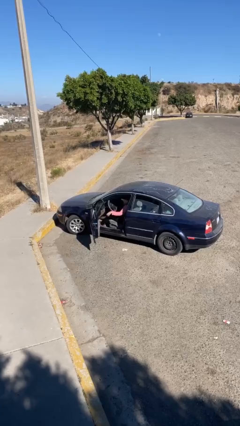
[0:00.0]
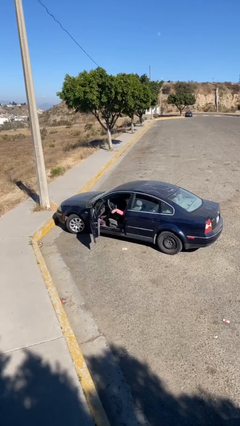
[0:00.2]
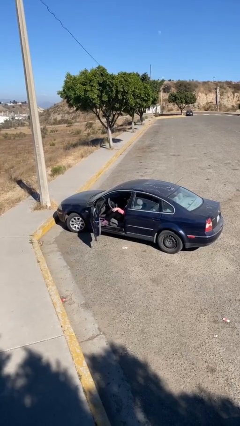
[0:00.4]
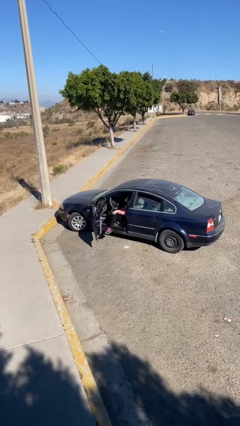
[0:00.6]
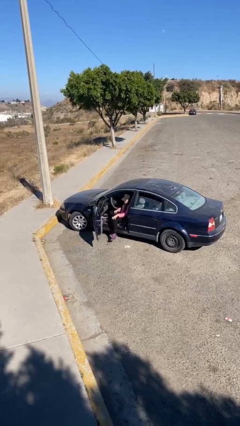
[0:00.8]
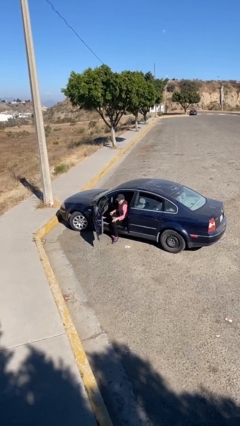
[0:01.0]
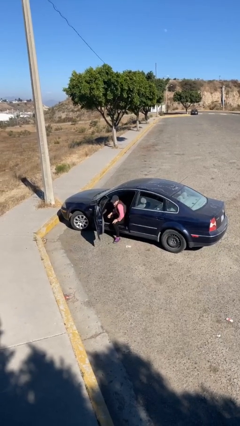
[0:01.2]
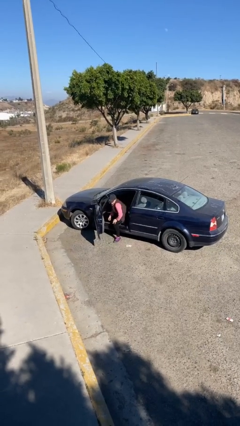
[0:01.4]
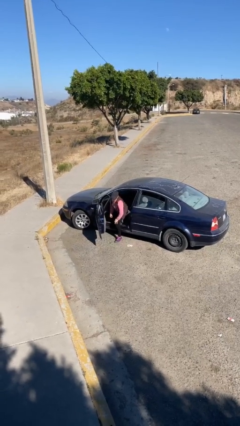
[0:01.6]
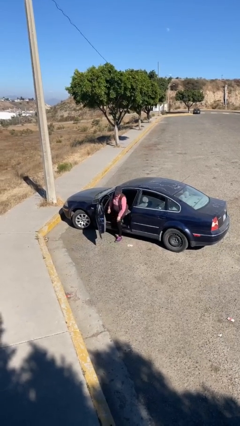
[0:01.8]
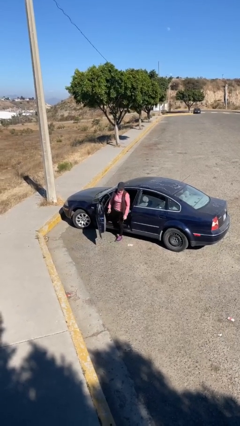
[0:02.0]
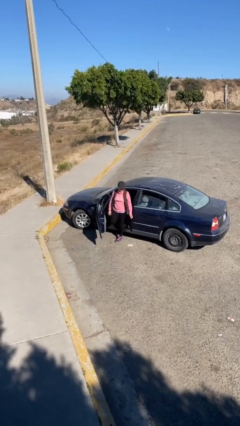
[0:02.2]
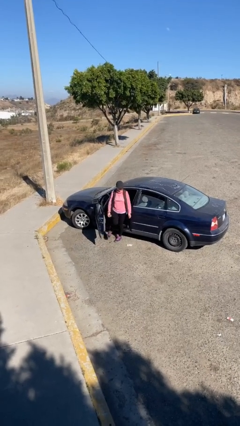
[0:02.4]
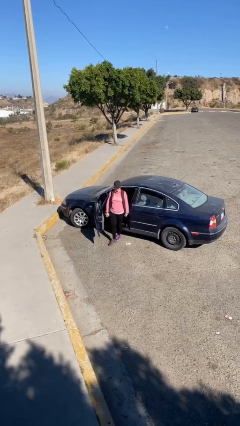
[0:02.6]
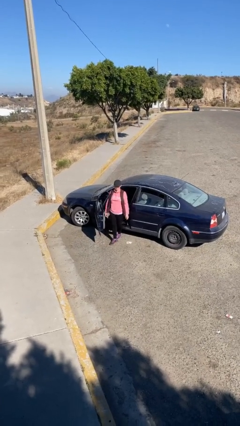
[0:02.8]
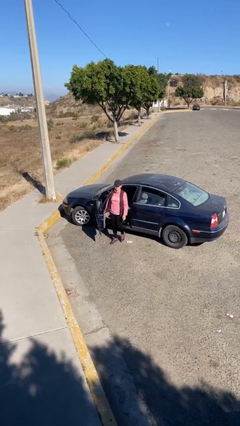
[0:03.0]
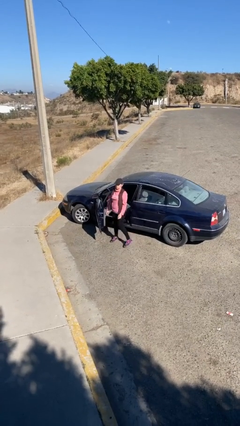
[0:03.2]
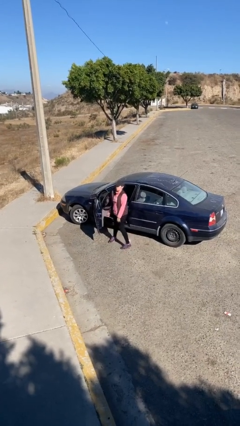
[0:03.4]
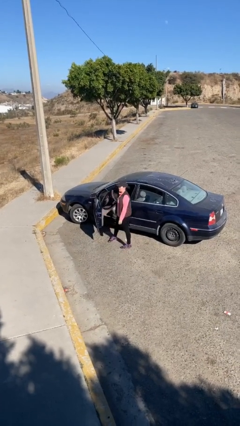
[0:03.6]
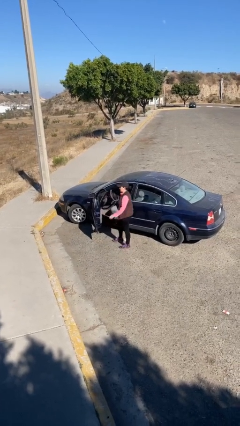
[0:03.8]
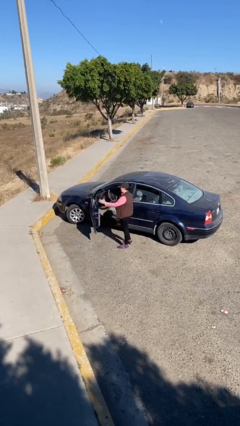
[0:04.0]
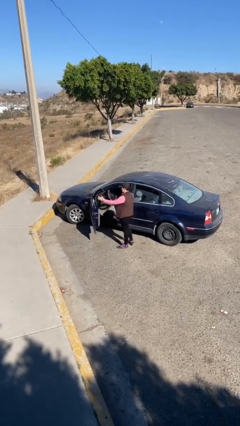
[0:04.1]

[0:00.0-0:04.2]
person exits car

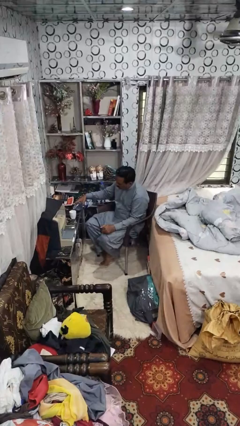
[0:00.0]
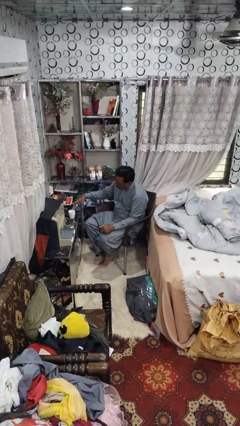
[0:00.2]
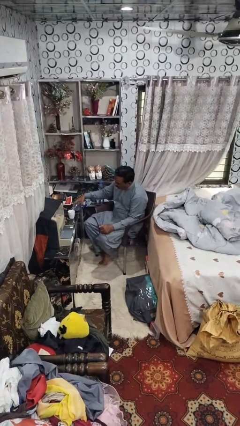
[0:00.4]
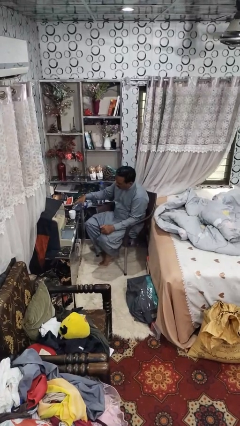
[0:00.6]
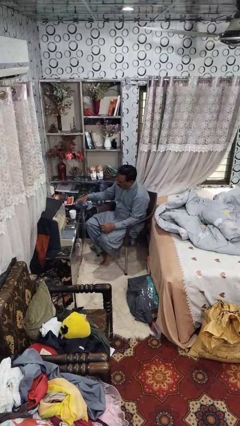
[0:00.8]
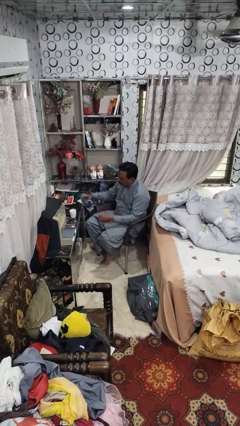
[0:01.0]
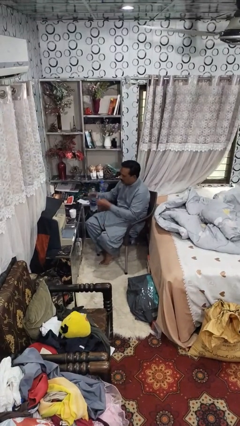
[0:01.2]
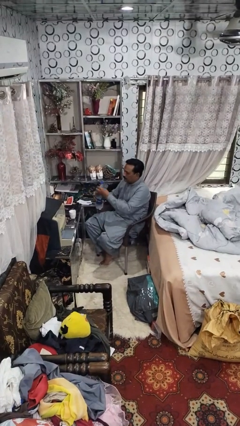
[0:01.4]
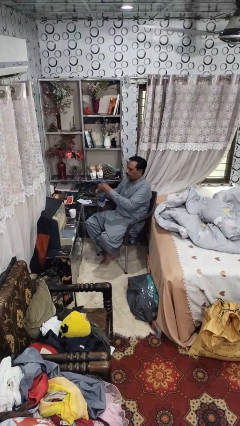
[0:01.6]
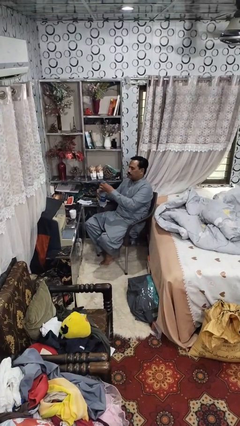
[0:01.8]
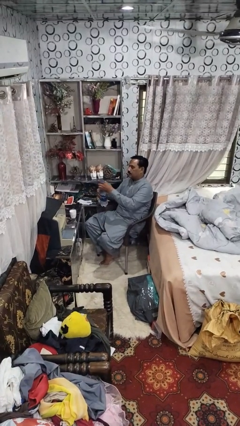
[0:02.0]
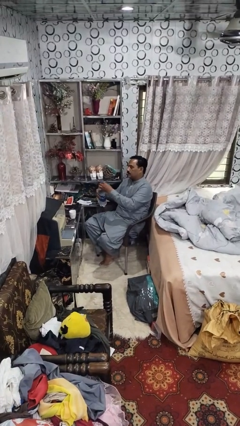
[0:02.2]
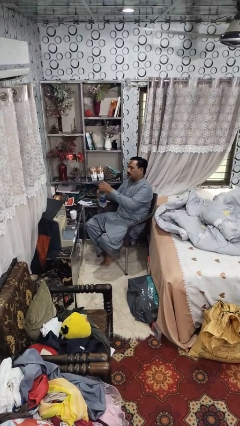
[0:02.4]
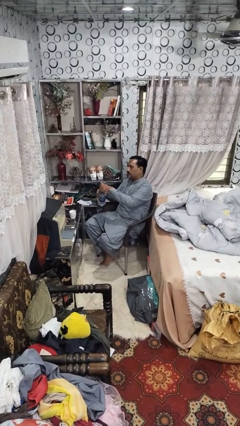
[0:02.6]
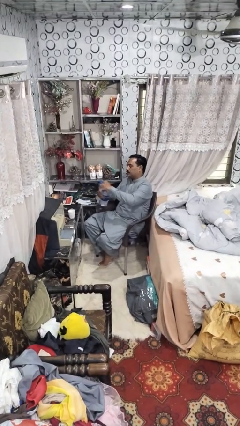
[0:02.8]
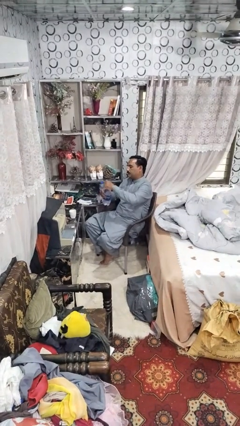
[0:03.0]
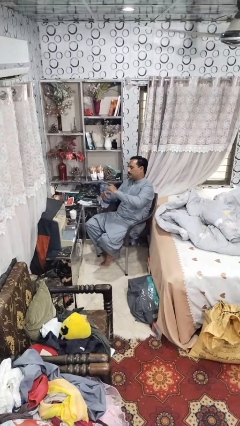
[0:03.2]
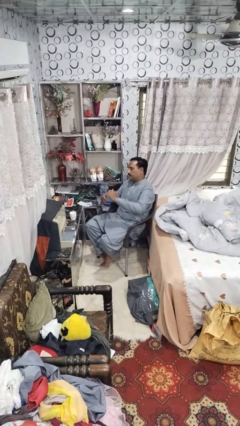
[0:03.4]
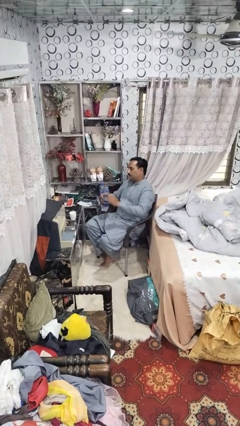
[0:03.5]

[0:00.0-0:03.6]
person screws lid to bottle

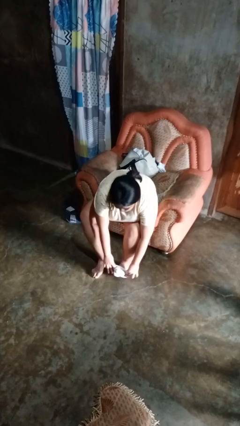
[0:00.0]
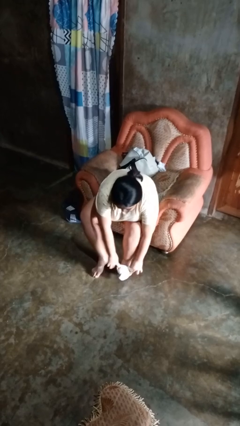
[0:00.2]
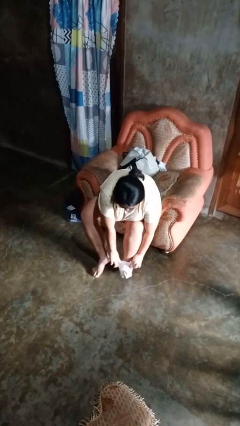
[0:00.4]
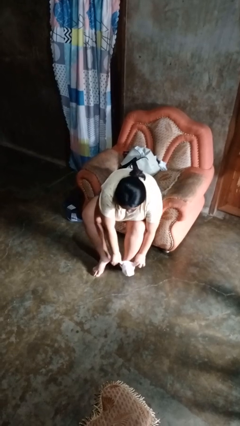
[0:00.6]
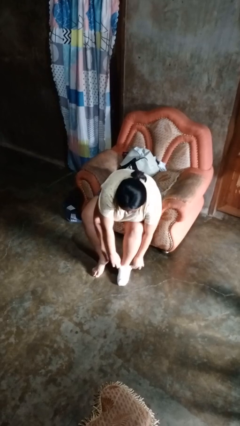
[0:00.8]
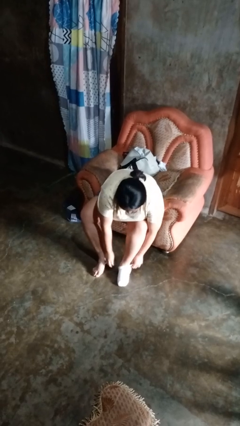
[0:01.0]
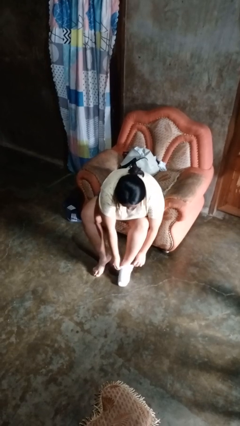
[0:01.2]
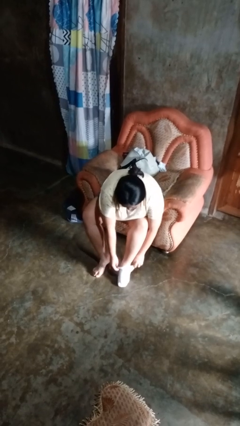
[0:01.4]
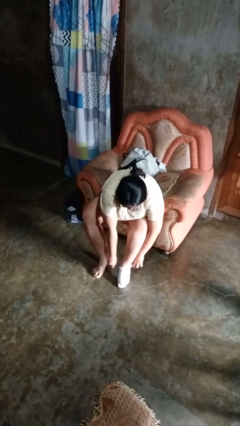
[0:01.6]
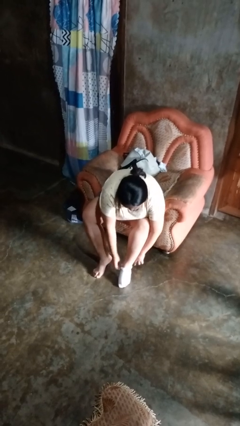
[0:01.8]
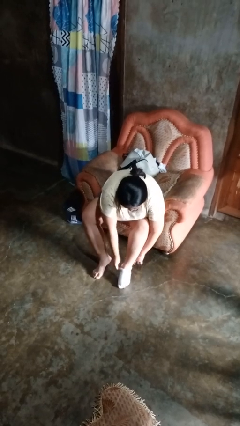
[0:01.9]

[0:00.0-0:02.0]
person puts on socks

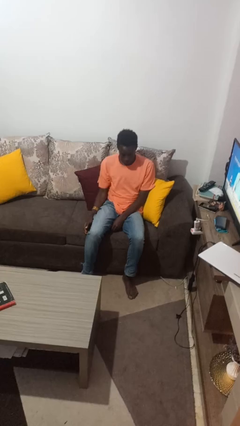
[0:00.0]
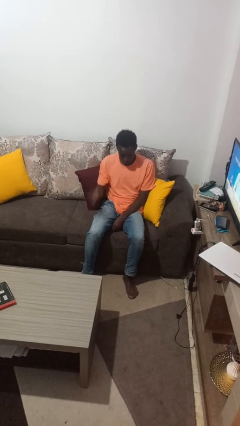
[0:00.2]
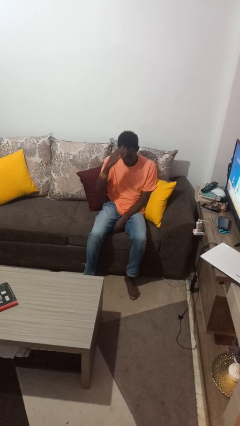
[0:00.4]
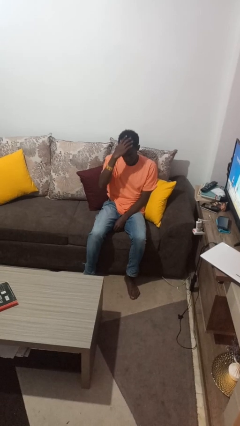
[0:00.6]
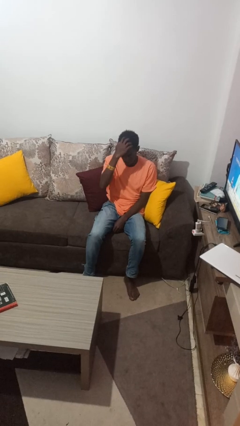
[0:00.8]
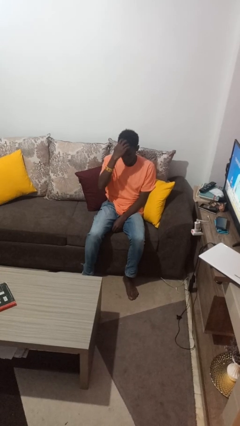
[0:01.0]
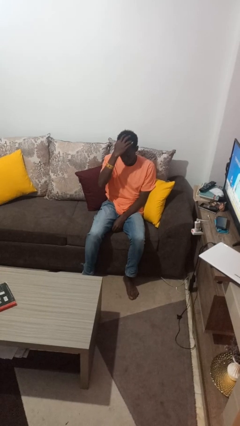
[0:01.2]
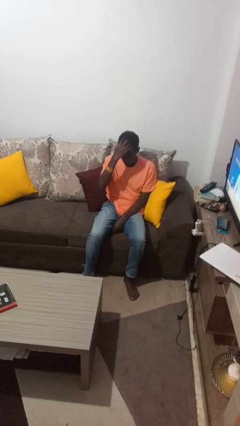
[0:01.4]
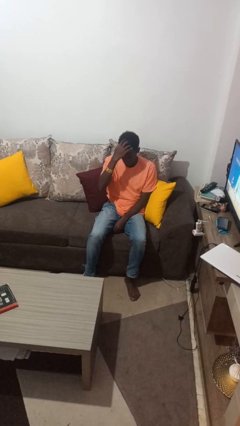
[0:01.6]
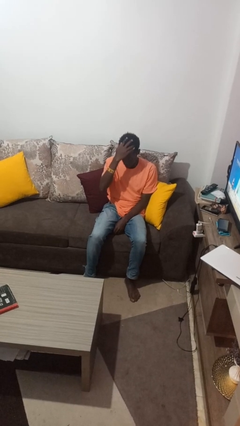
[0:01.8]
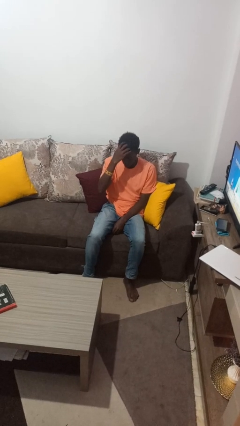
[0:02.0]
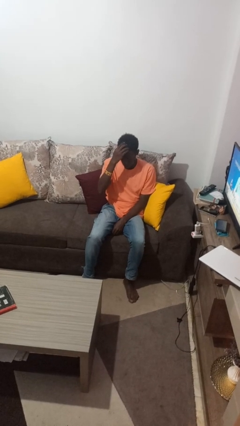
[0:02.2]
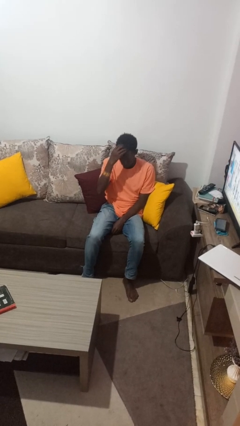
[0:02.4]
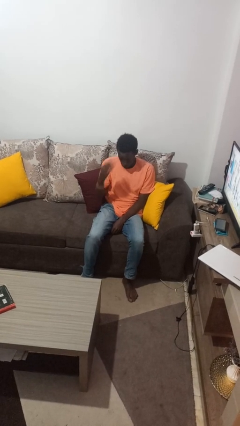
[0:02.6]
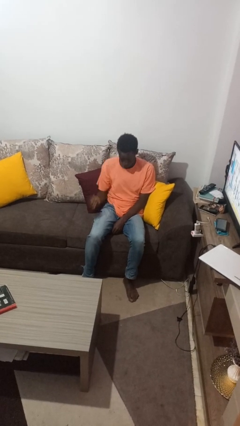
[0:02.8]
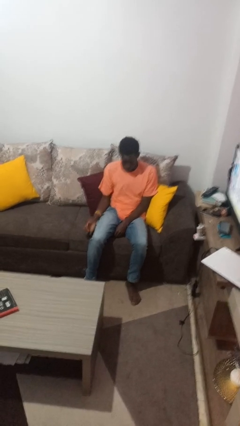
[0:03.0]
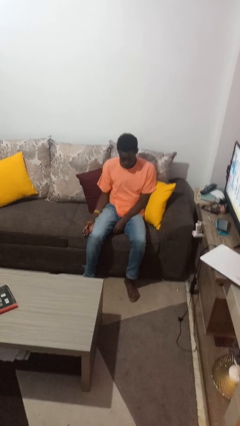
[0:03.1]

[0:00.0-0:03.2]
person strokes hair

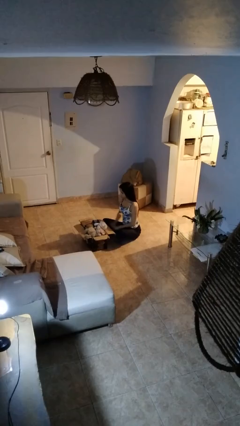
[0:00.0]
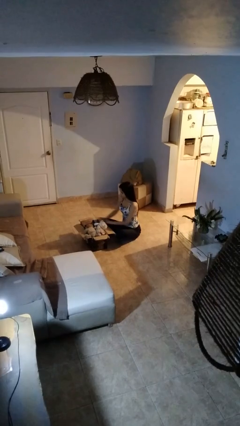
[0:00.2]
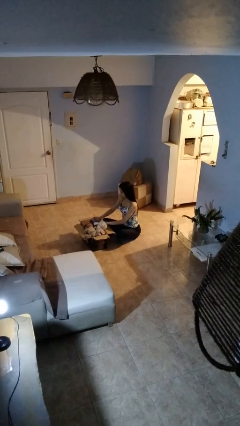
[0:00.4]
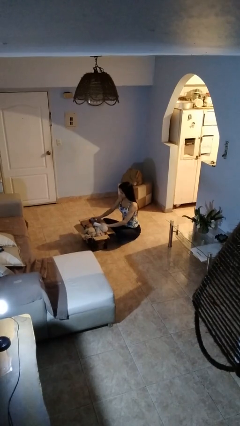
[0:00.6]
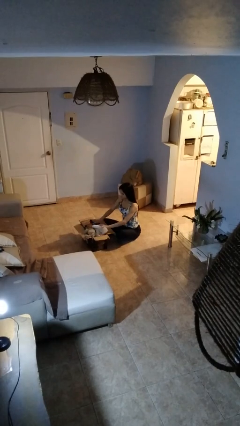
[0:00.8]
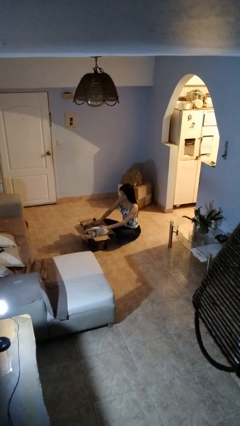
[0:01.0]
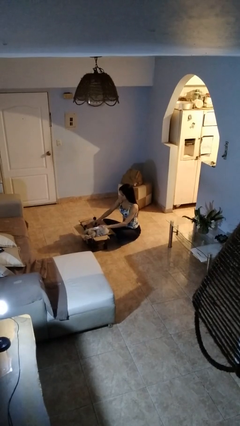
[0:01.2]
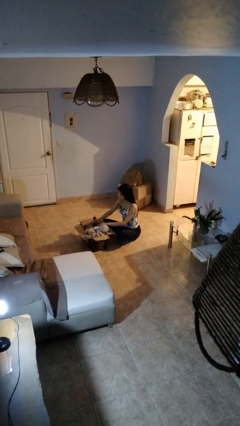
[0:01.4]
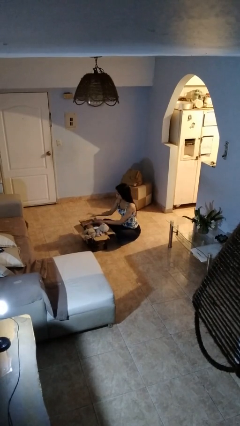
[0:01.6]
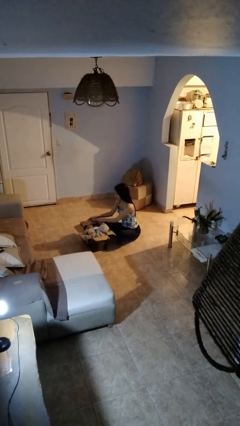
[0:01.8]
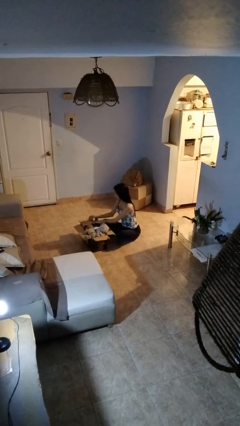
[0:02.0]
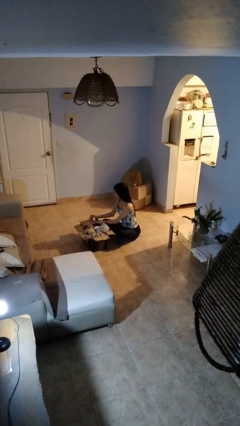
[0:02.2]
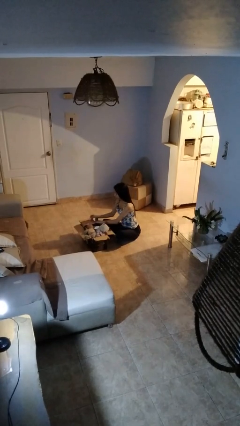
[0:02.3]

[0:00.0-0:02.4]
person searches in box

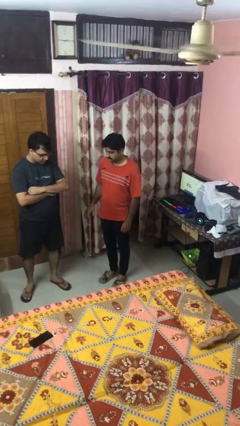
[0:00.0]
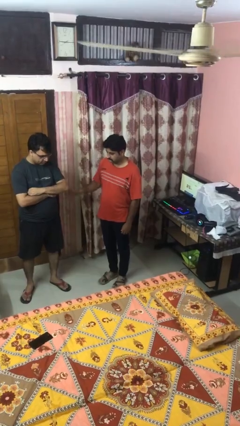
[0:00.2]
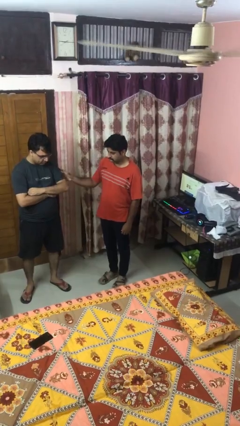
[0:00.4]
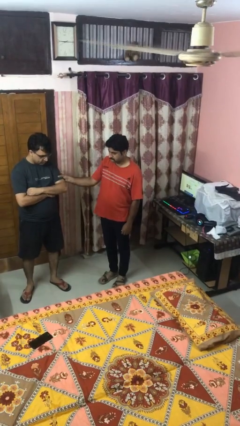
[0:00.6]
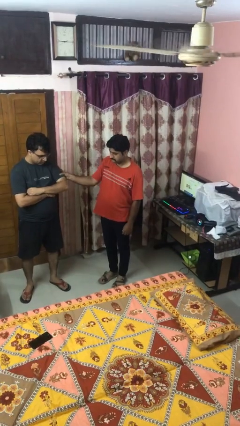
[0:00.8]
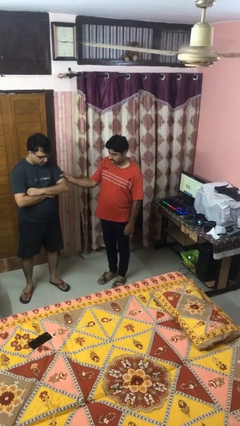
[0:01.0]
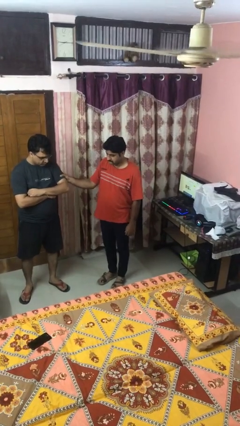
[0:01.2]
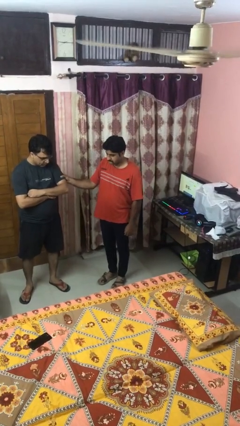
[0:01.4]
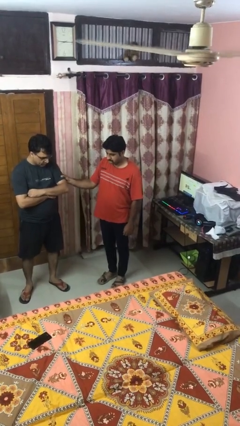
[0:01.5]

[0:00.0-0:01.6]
person grabs person by bicep

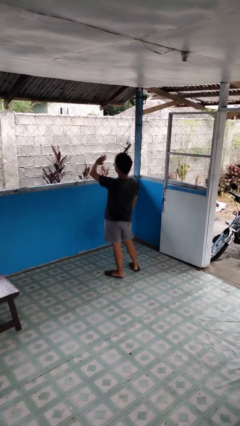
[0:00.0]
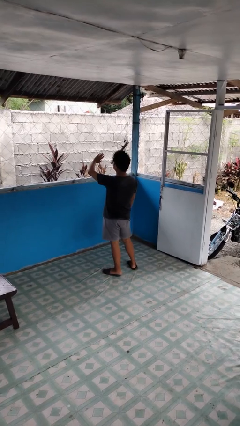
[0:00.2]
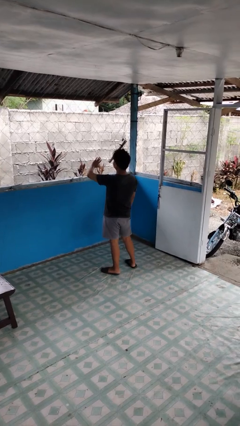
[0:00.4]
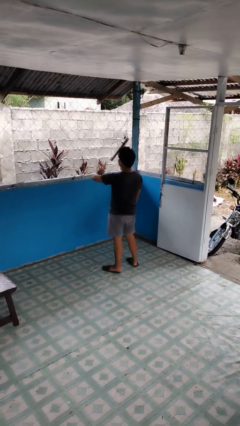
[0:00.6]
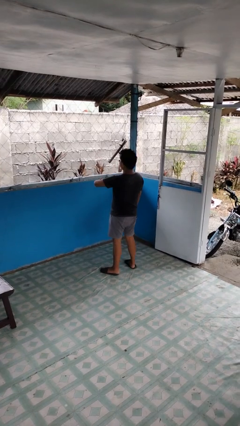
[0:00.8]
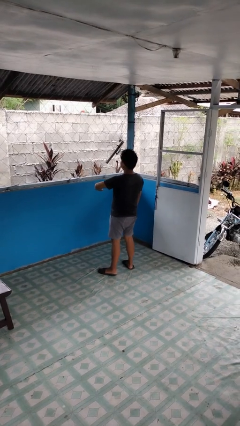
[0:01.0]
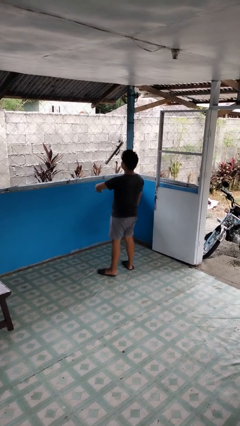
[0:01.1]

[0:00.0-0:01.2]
person gestures swipe down
